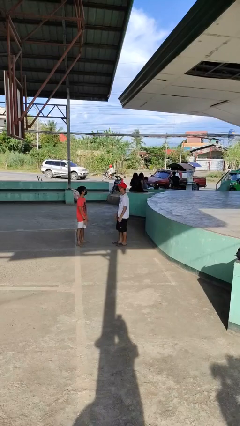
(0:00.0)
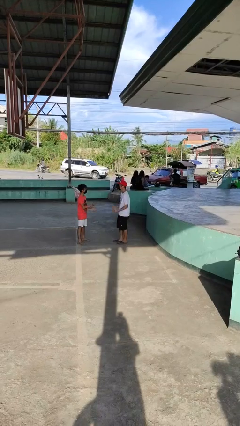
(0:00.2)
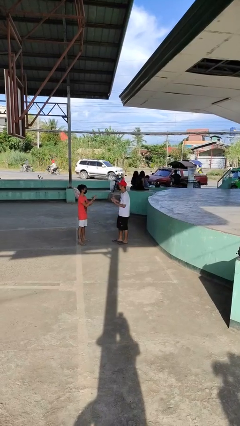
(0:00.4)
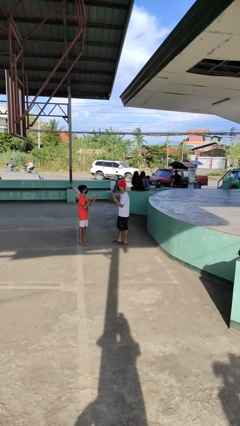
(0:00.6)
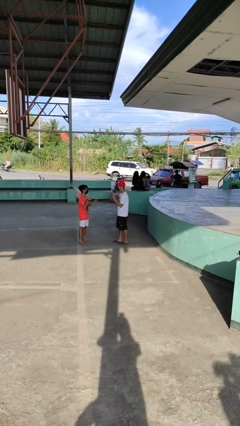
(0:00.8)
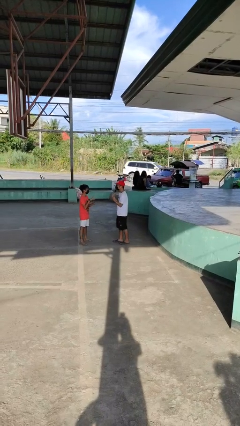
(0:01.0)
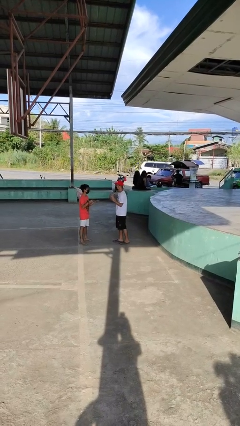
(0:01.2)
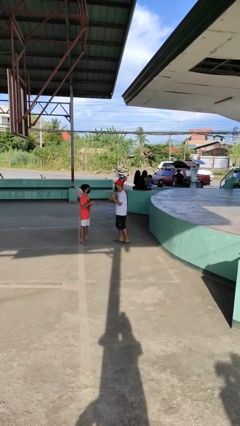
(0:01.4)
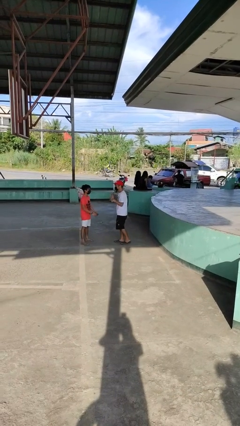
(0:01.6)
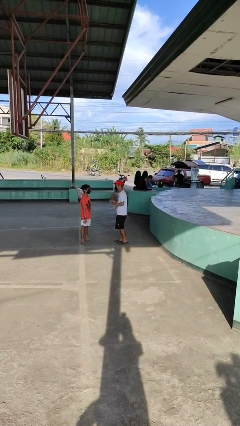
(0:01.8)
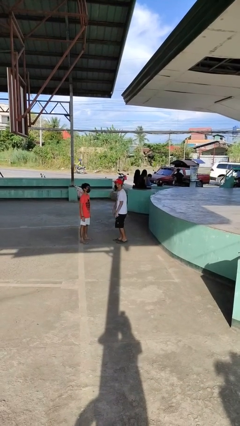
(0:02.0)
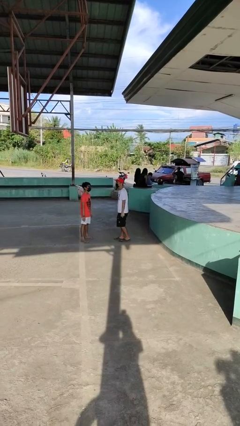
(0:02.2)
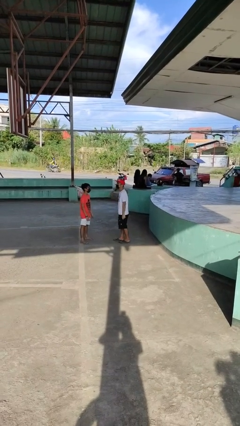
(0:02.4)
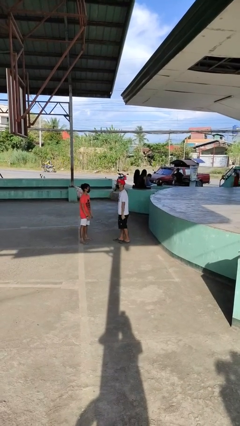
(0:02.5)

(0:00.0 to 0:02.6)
person talks to person

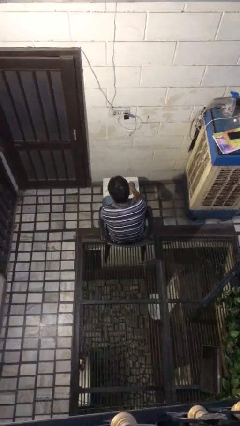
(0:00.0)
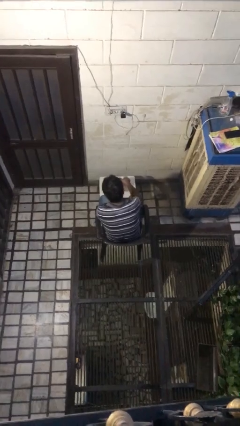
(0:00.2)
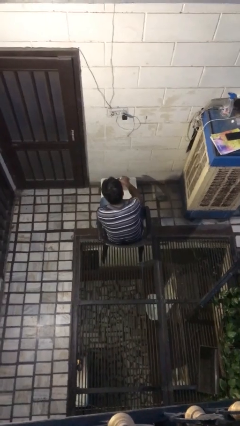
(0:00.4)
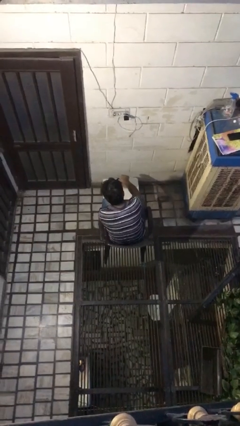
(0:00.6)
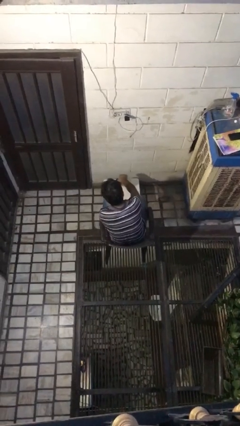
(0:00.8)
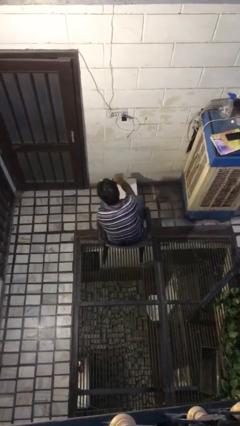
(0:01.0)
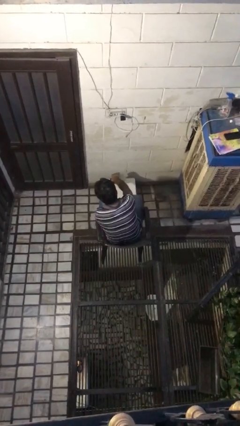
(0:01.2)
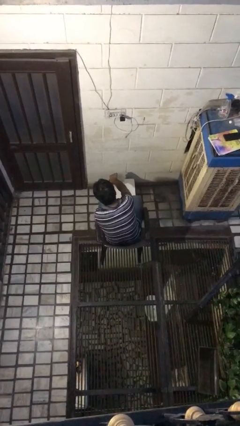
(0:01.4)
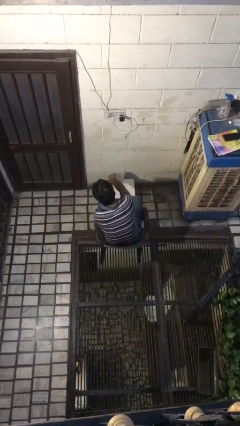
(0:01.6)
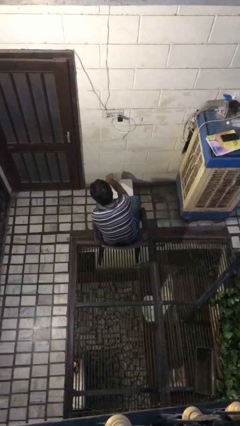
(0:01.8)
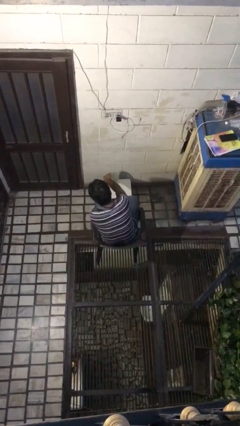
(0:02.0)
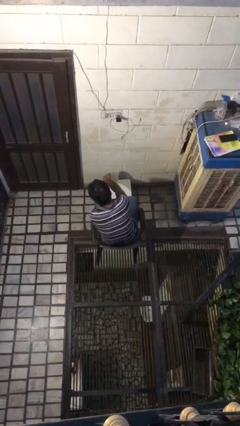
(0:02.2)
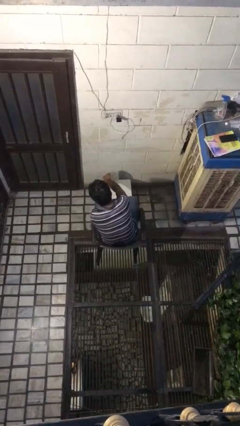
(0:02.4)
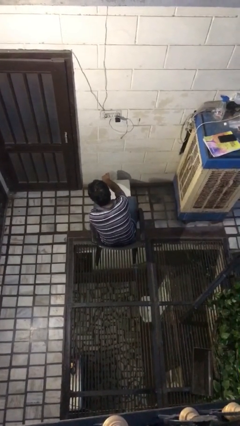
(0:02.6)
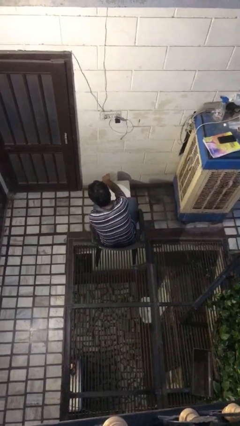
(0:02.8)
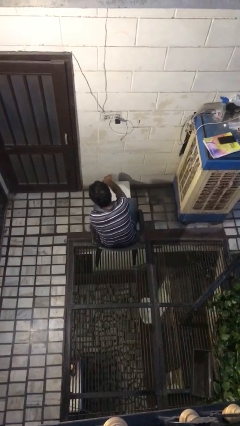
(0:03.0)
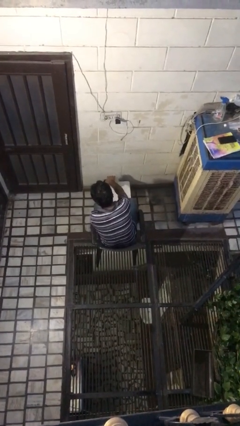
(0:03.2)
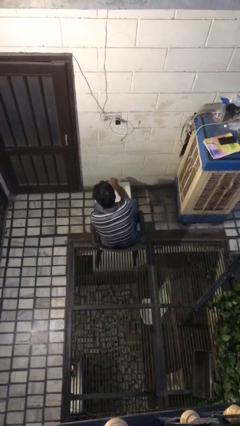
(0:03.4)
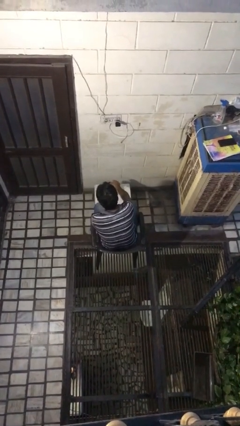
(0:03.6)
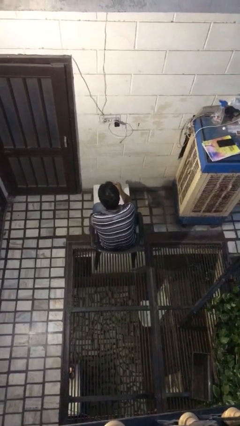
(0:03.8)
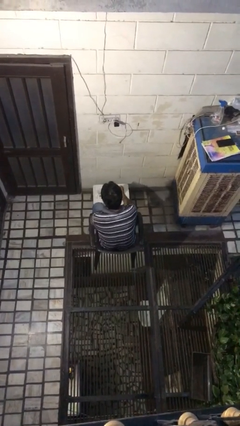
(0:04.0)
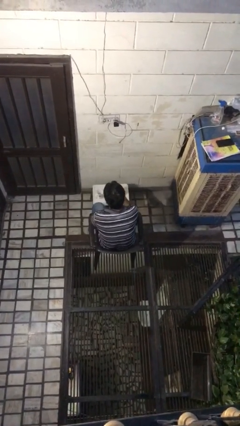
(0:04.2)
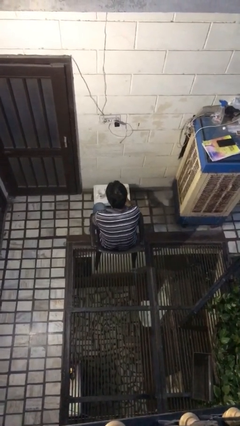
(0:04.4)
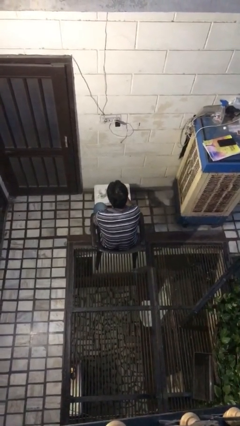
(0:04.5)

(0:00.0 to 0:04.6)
person pours coffee into mug

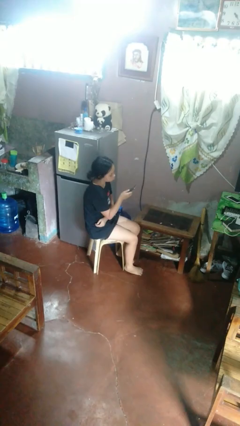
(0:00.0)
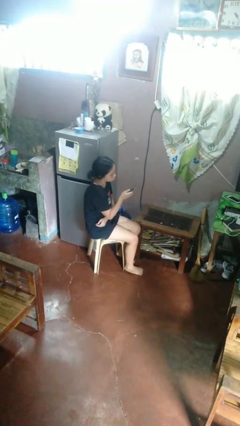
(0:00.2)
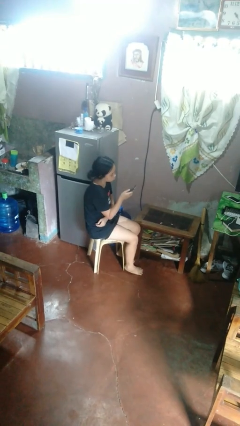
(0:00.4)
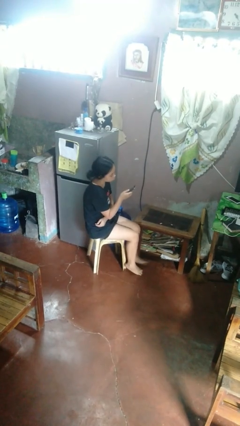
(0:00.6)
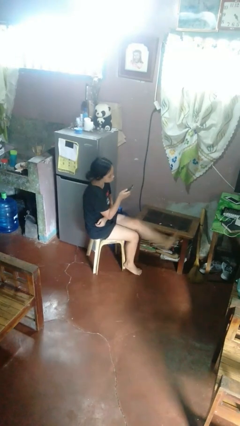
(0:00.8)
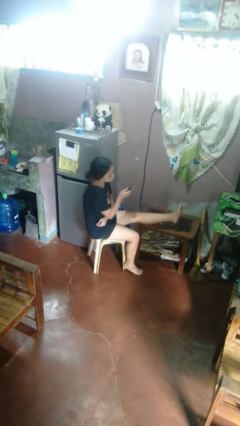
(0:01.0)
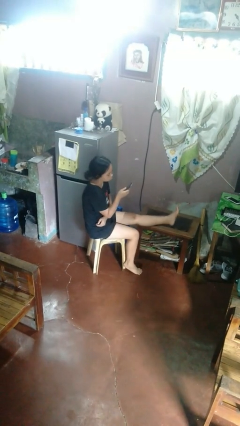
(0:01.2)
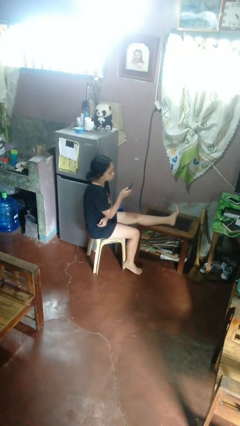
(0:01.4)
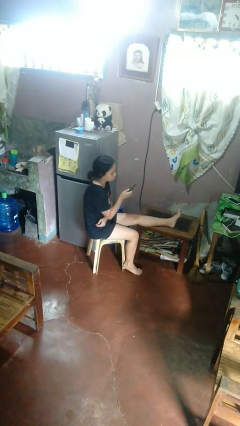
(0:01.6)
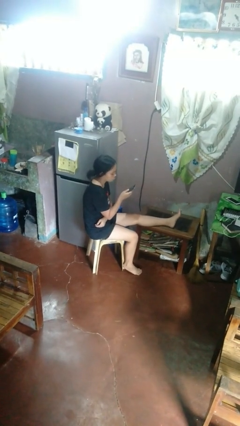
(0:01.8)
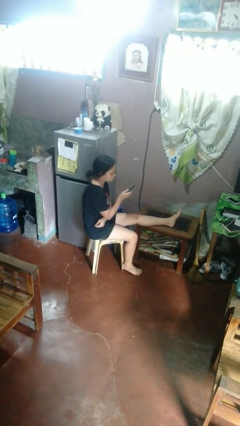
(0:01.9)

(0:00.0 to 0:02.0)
person puts feet up

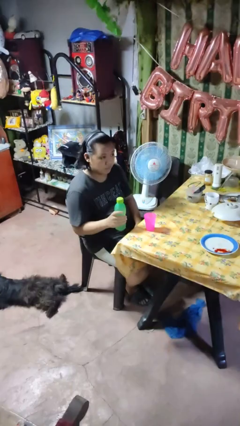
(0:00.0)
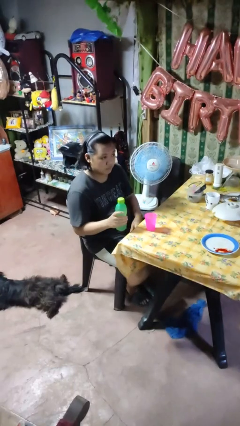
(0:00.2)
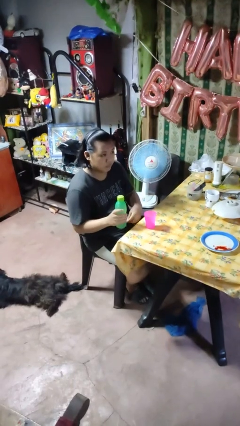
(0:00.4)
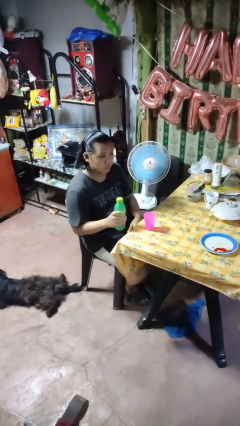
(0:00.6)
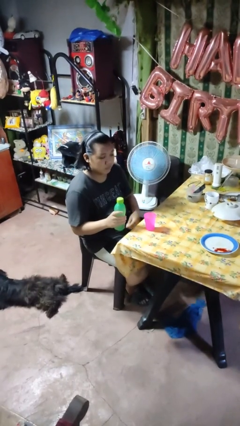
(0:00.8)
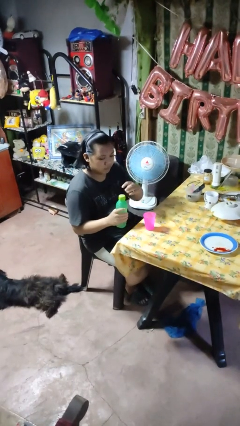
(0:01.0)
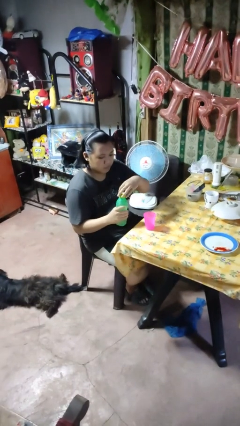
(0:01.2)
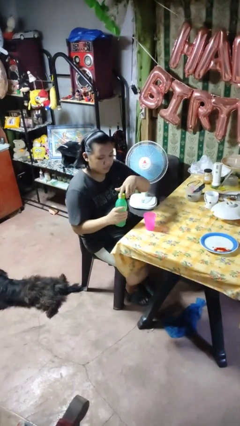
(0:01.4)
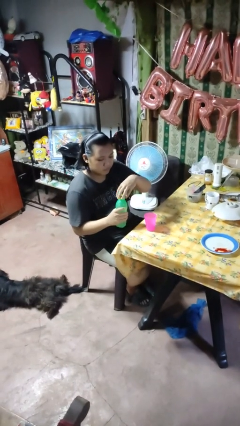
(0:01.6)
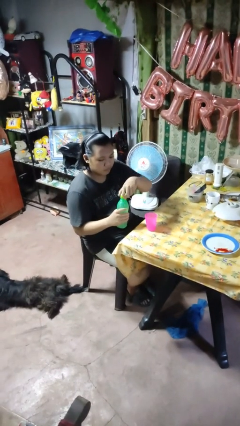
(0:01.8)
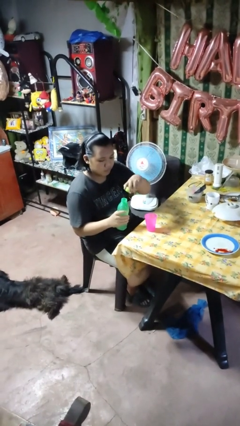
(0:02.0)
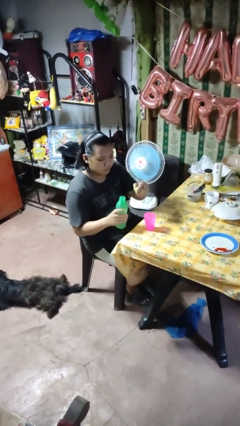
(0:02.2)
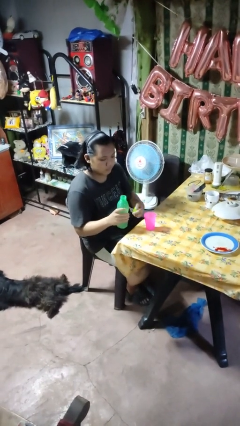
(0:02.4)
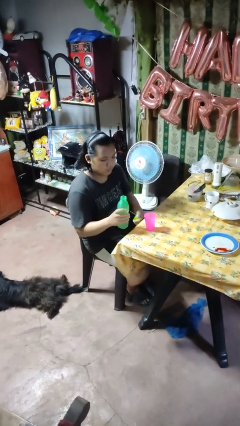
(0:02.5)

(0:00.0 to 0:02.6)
person unscrews lid from bottle

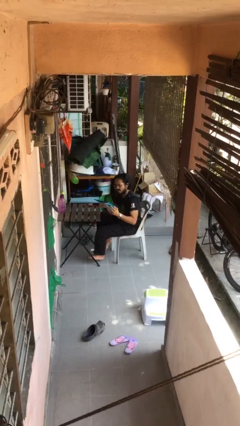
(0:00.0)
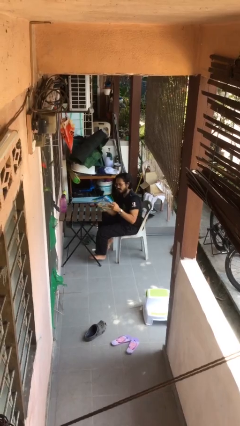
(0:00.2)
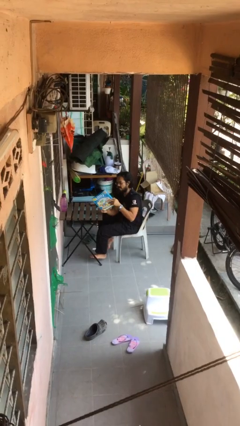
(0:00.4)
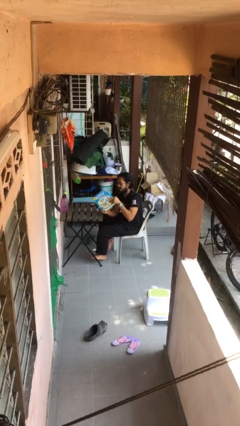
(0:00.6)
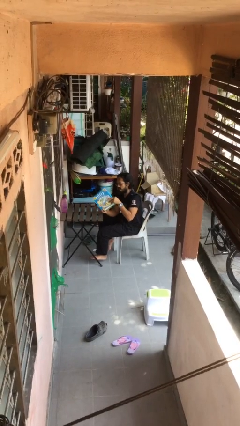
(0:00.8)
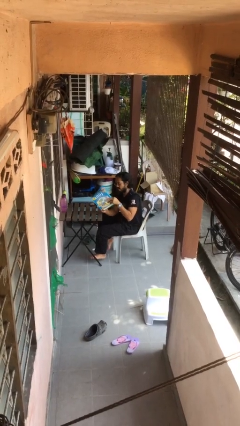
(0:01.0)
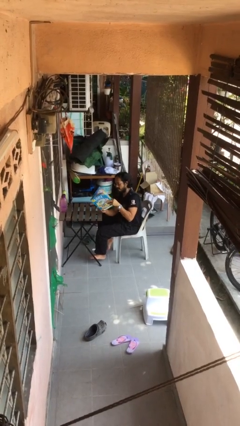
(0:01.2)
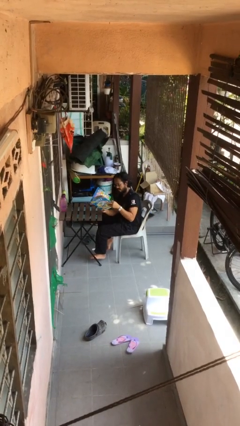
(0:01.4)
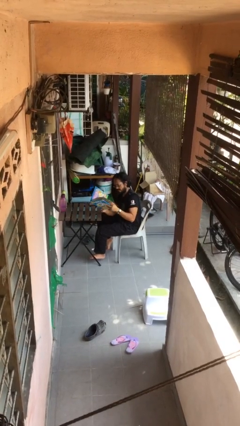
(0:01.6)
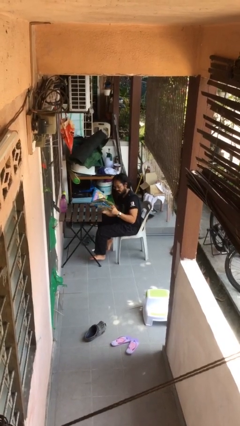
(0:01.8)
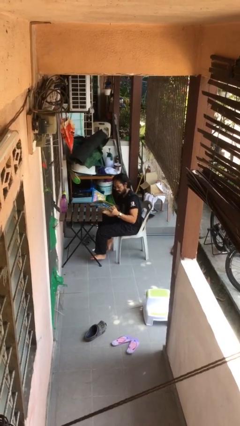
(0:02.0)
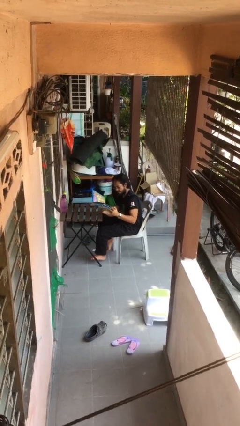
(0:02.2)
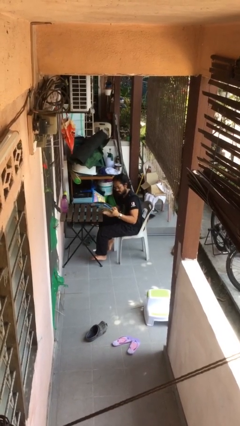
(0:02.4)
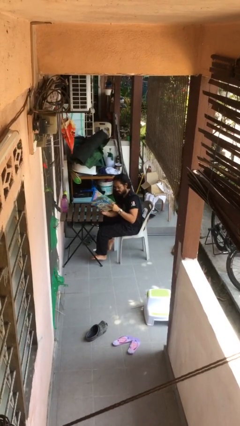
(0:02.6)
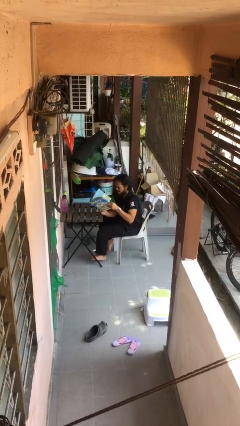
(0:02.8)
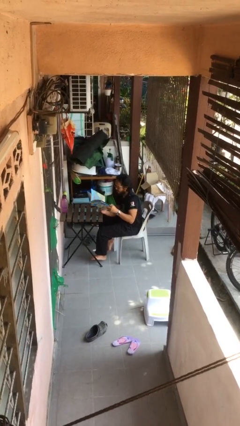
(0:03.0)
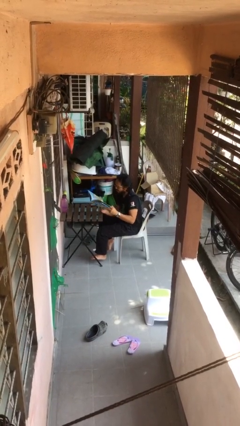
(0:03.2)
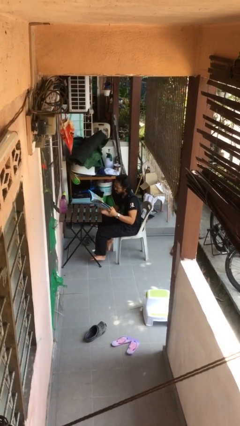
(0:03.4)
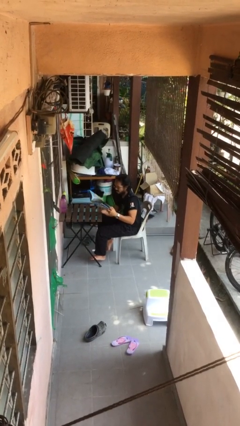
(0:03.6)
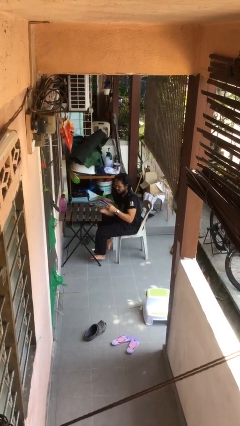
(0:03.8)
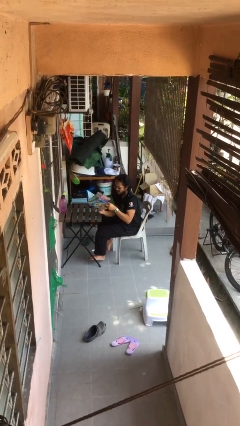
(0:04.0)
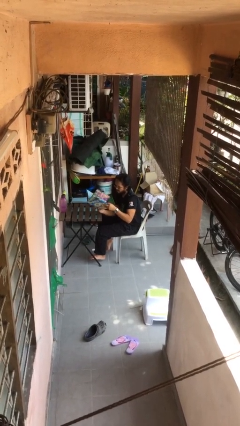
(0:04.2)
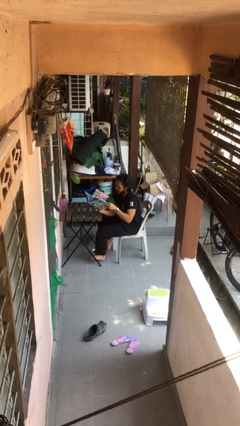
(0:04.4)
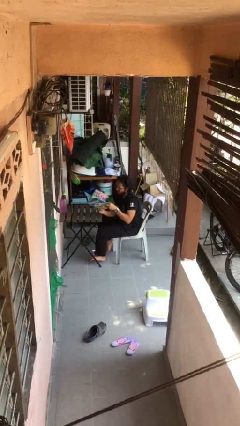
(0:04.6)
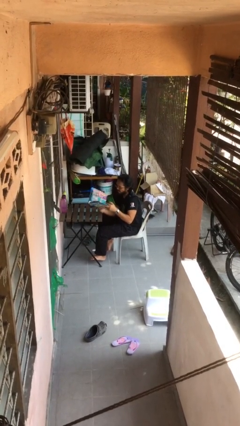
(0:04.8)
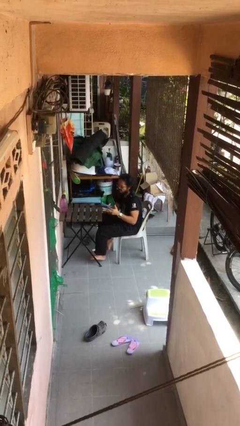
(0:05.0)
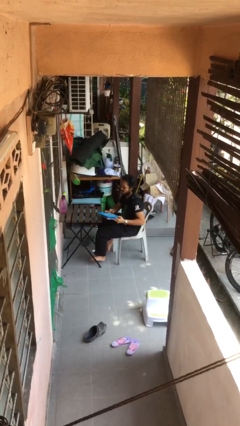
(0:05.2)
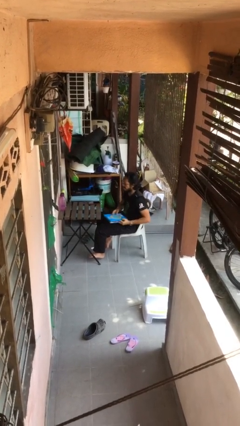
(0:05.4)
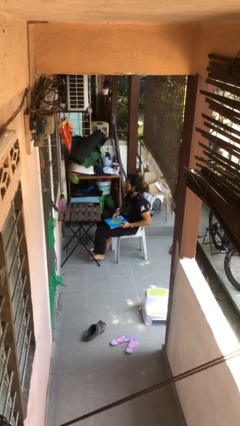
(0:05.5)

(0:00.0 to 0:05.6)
person reads document
